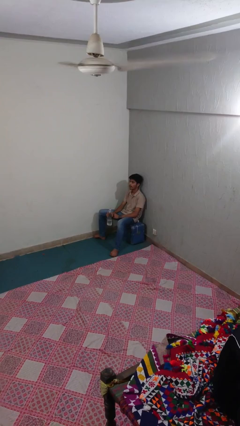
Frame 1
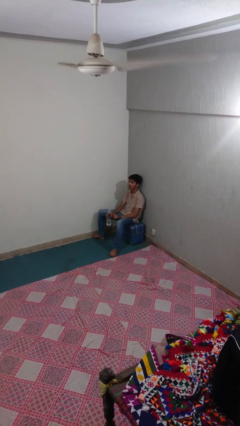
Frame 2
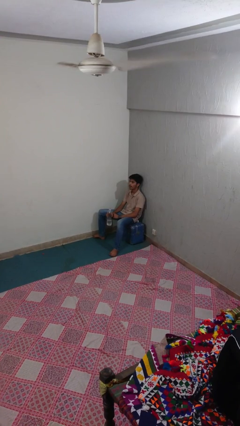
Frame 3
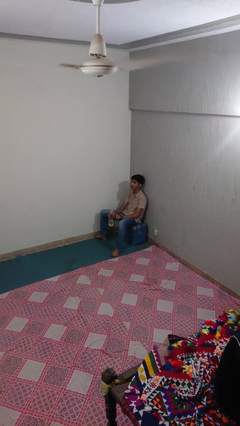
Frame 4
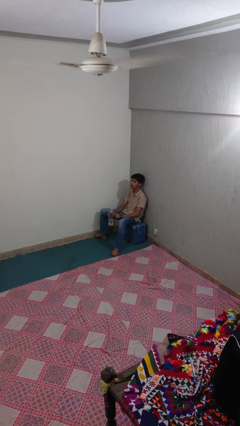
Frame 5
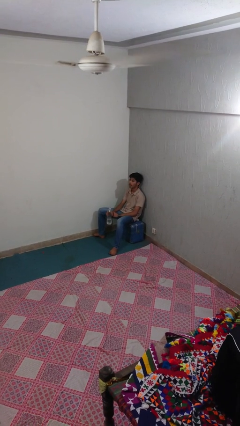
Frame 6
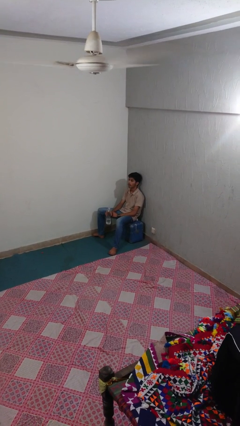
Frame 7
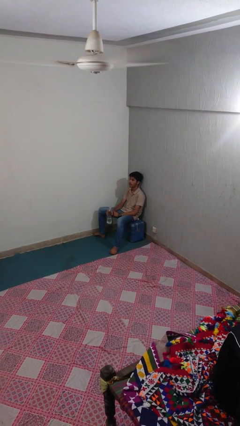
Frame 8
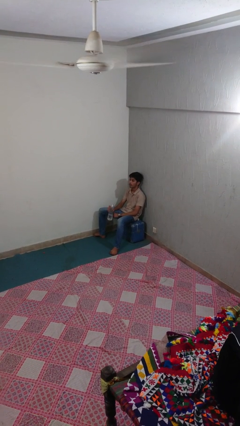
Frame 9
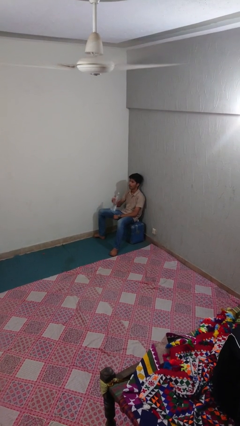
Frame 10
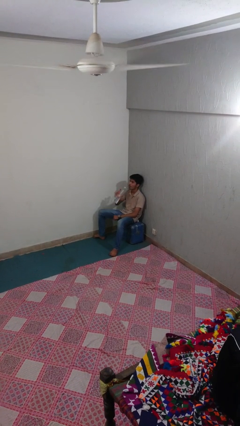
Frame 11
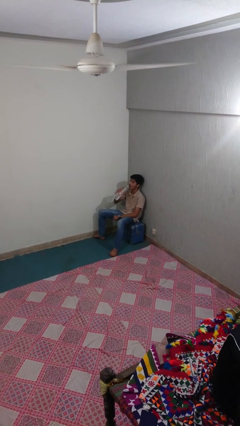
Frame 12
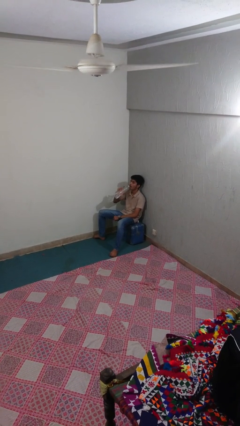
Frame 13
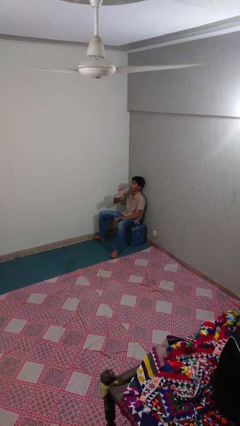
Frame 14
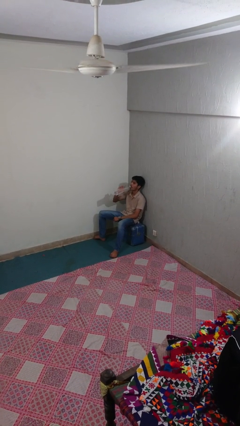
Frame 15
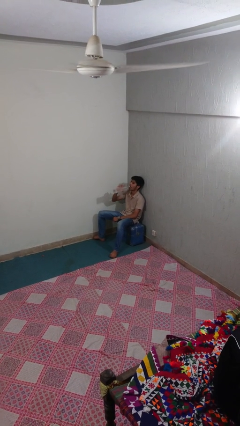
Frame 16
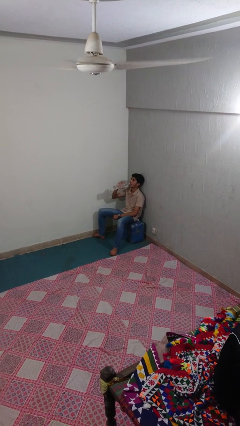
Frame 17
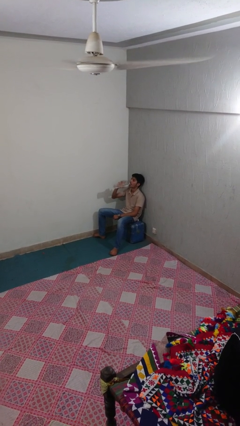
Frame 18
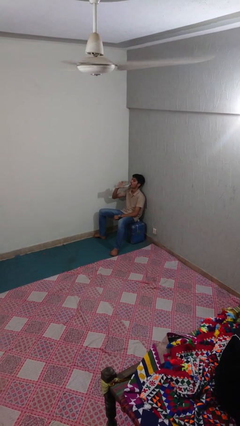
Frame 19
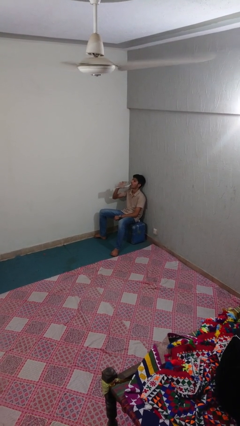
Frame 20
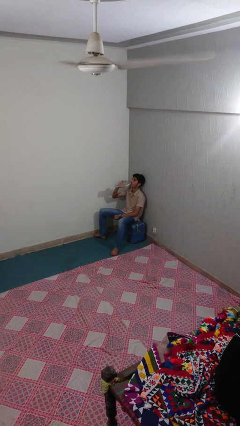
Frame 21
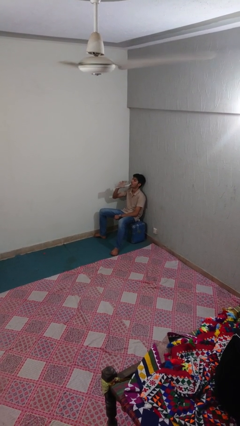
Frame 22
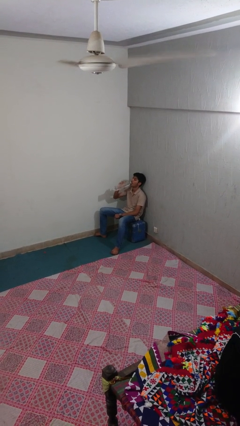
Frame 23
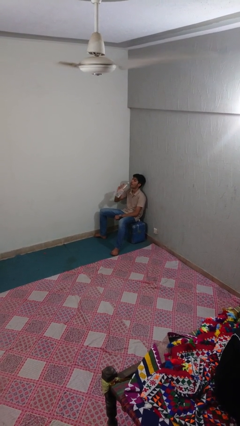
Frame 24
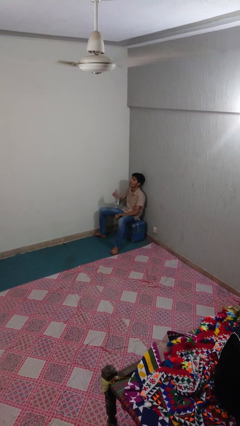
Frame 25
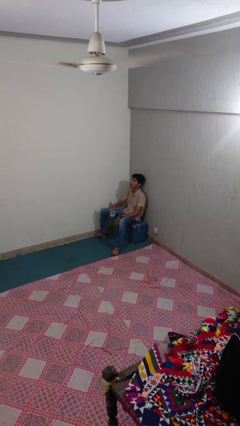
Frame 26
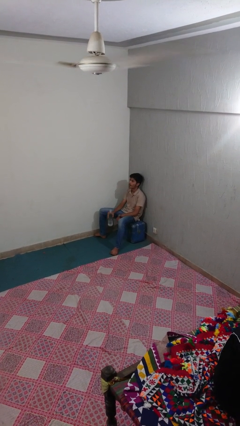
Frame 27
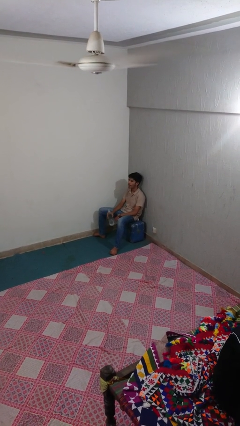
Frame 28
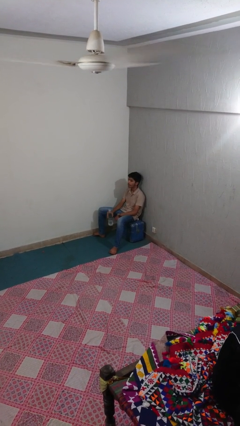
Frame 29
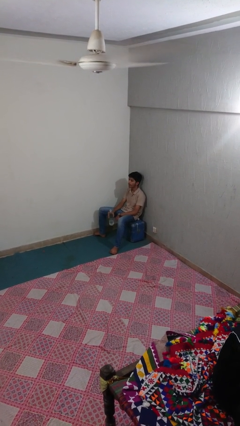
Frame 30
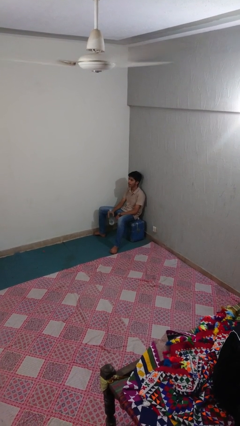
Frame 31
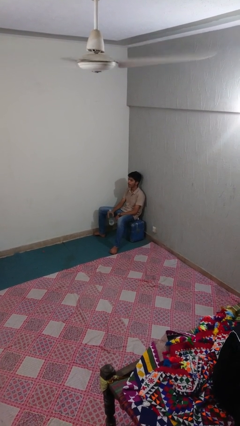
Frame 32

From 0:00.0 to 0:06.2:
person drinks from bottle

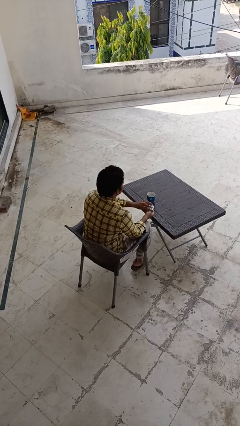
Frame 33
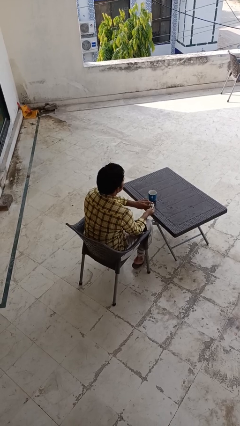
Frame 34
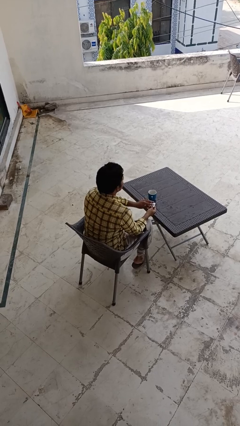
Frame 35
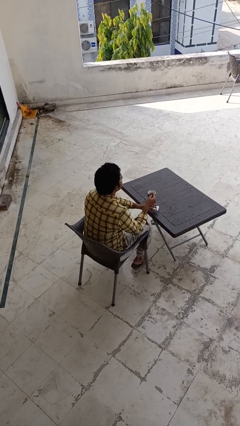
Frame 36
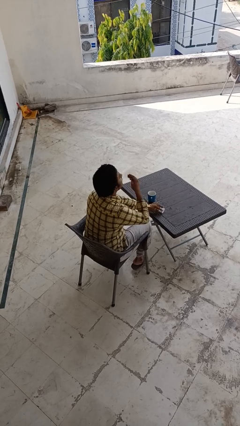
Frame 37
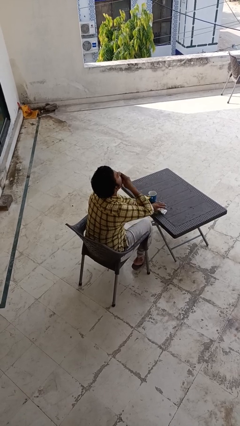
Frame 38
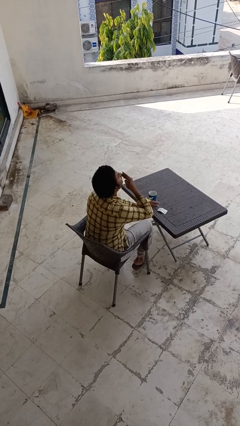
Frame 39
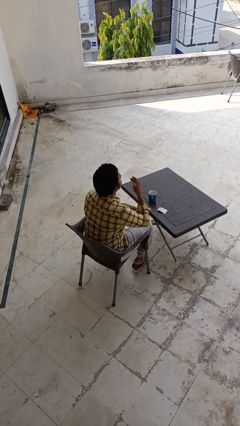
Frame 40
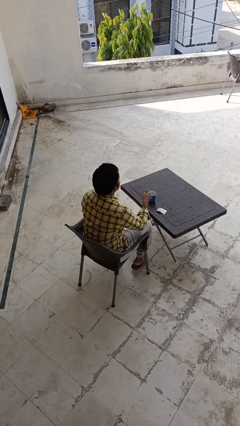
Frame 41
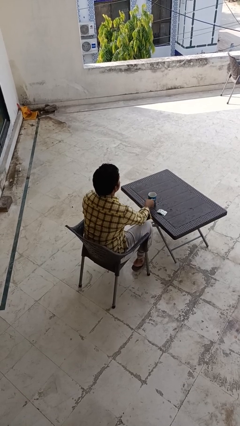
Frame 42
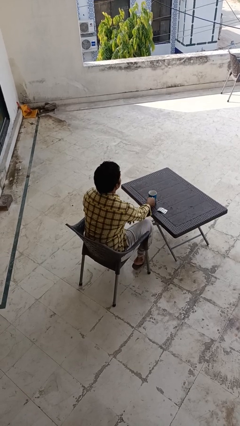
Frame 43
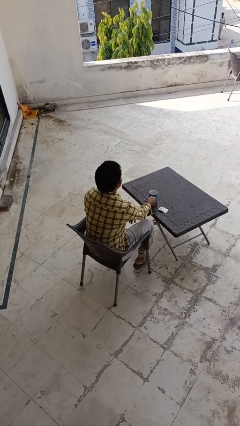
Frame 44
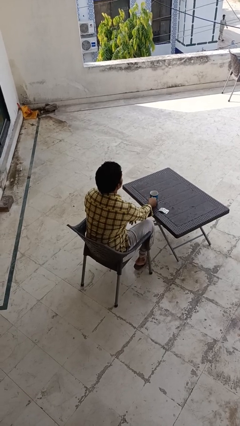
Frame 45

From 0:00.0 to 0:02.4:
person takes medicine pills

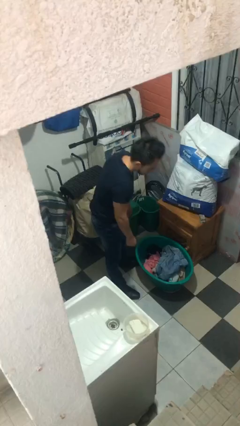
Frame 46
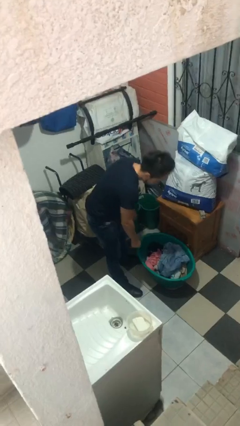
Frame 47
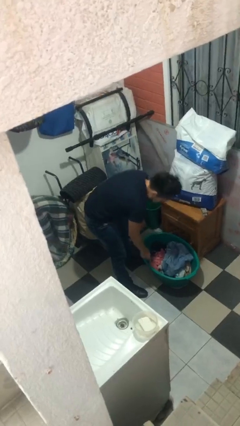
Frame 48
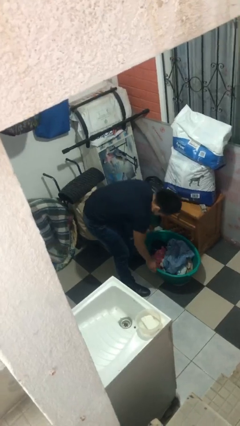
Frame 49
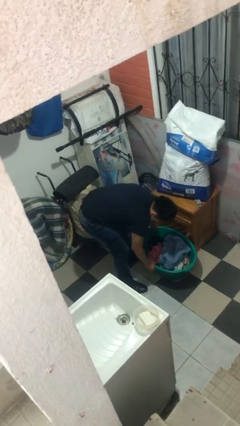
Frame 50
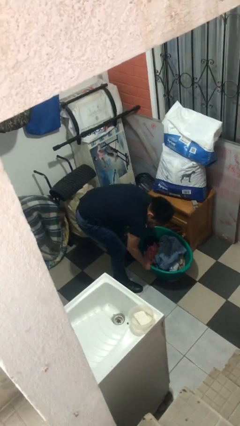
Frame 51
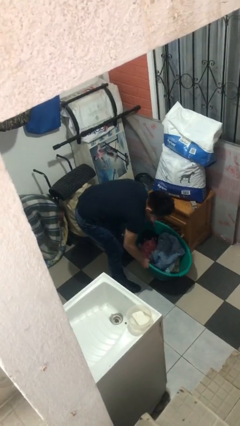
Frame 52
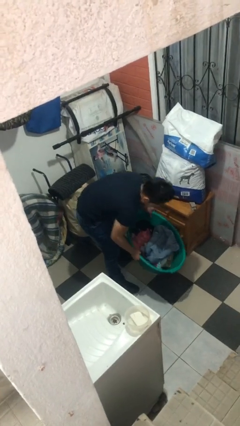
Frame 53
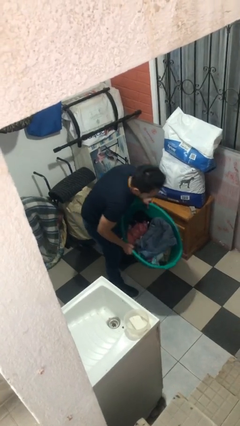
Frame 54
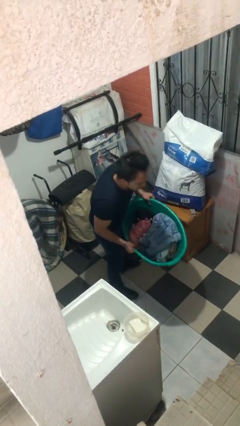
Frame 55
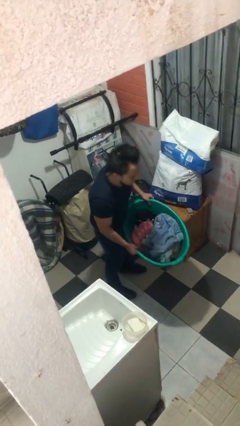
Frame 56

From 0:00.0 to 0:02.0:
person picks up object from floor

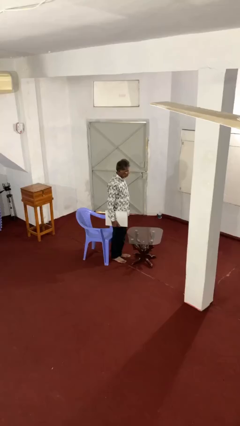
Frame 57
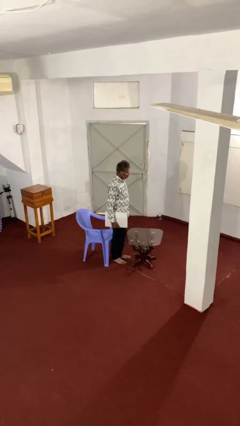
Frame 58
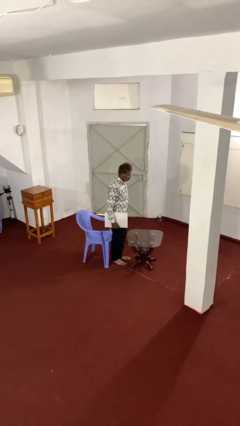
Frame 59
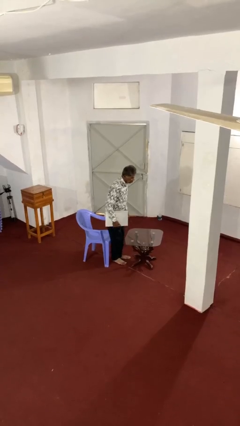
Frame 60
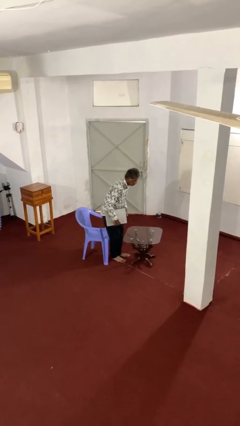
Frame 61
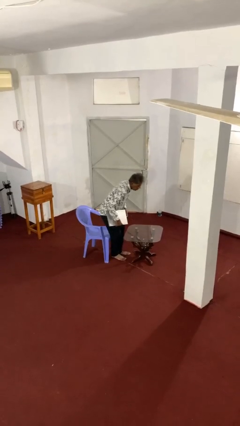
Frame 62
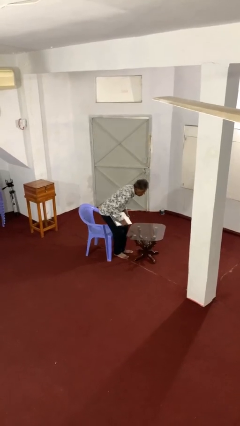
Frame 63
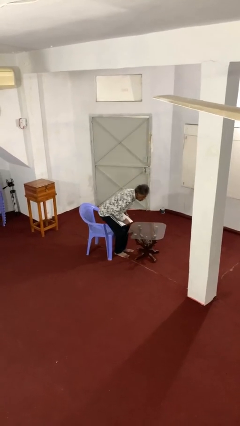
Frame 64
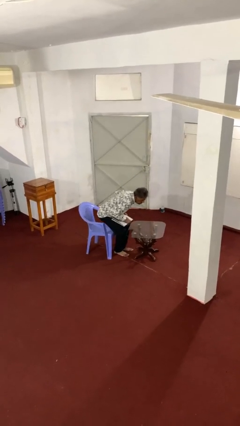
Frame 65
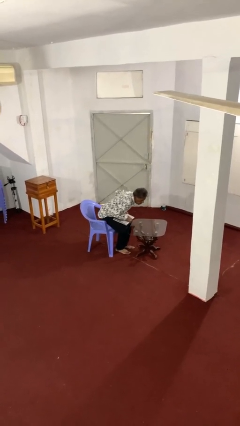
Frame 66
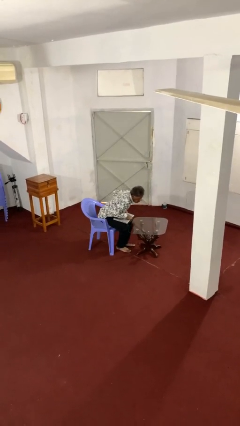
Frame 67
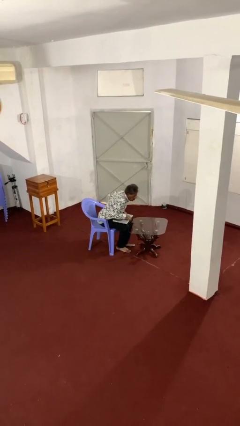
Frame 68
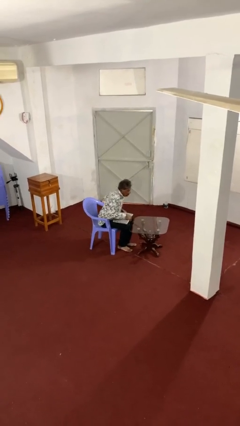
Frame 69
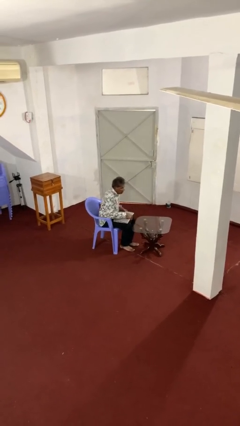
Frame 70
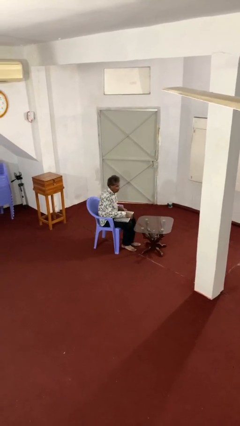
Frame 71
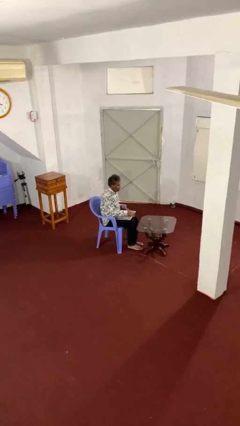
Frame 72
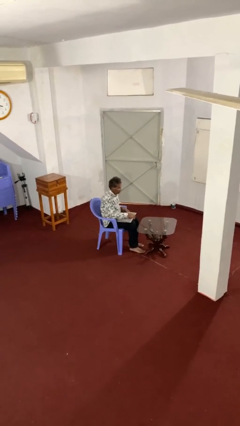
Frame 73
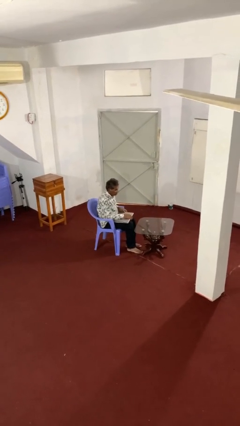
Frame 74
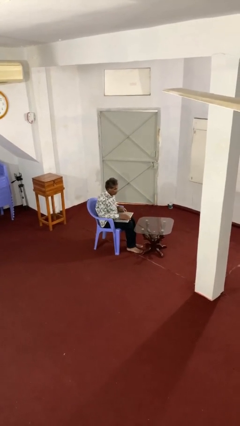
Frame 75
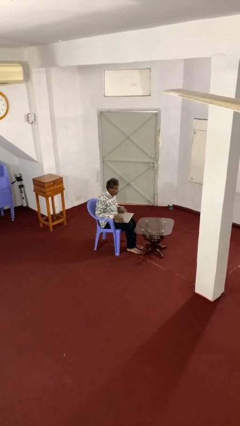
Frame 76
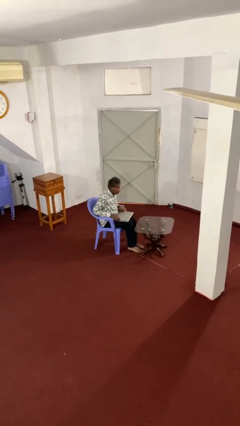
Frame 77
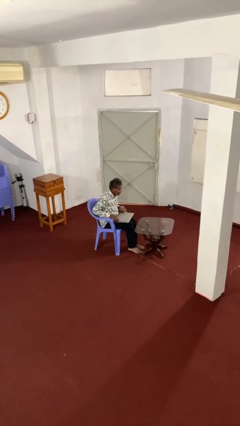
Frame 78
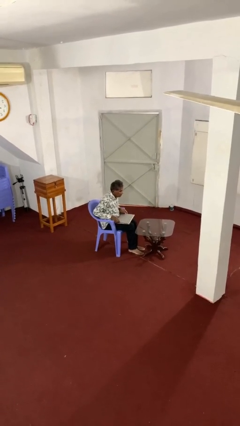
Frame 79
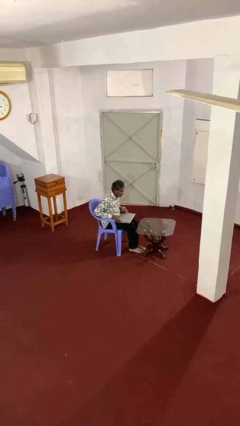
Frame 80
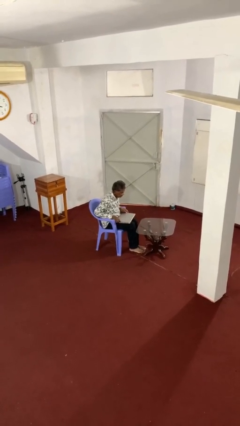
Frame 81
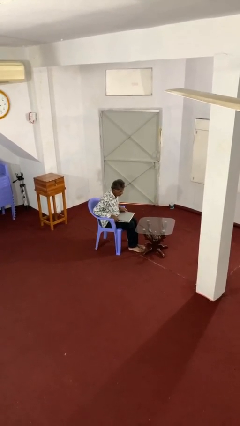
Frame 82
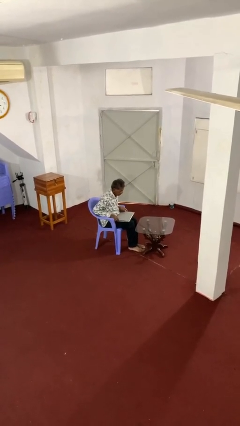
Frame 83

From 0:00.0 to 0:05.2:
person sits down

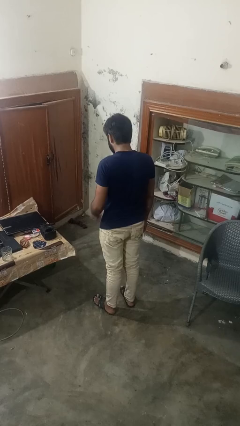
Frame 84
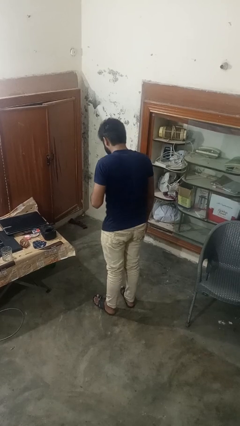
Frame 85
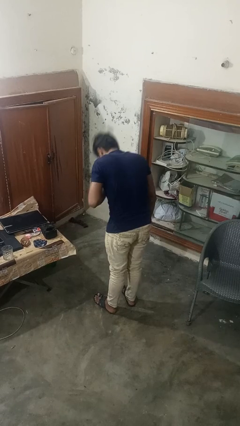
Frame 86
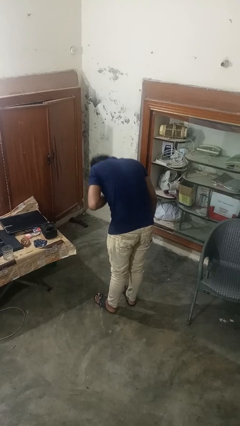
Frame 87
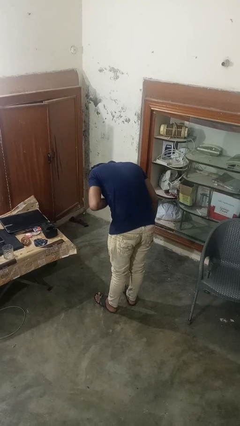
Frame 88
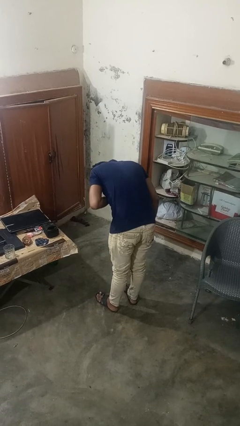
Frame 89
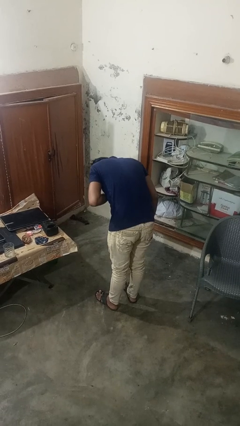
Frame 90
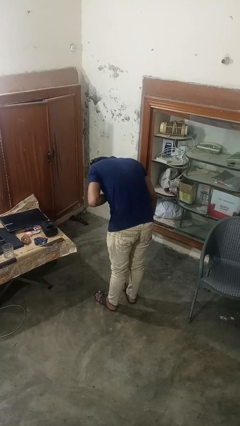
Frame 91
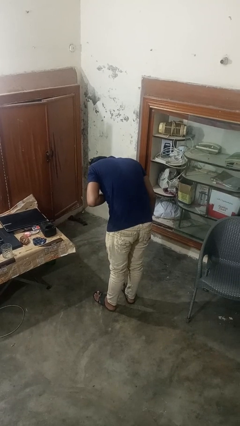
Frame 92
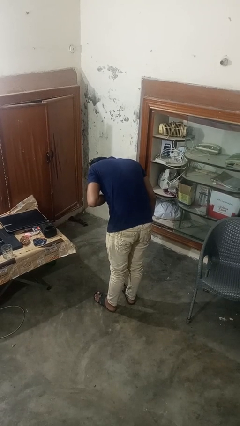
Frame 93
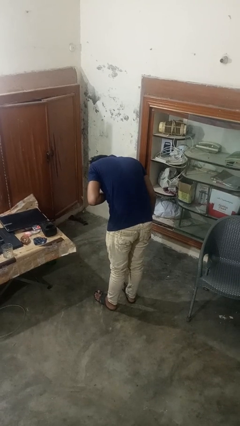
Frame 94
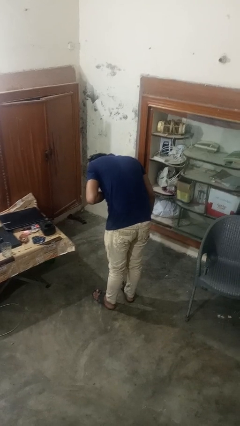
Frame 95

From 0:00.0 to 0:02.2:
person bows
